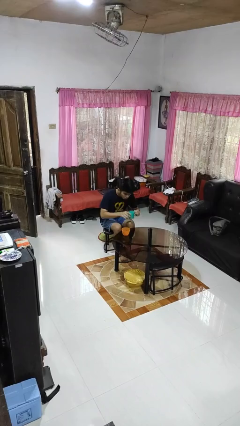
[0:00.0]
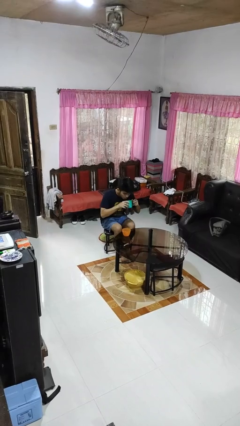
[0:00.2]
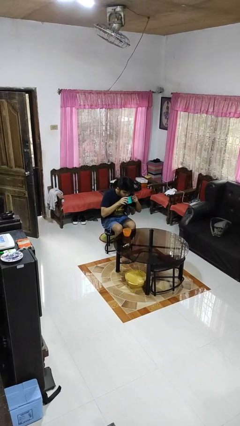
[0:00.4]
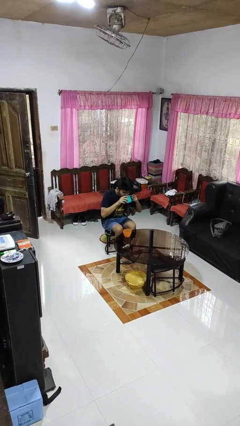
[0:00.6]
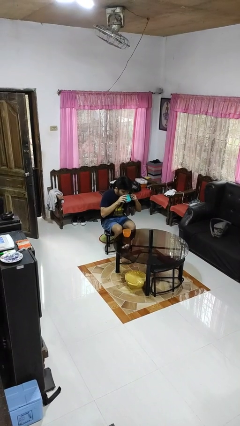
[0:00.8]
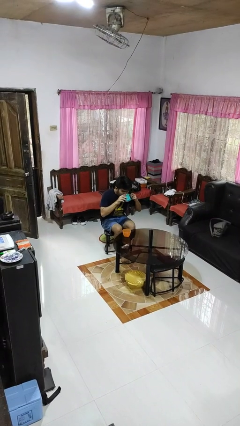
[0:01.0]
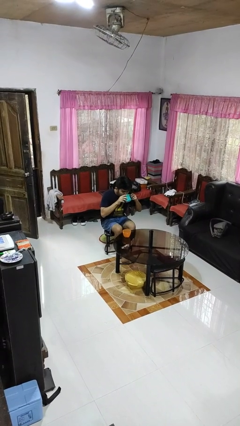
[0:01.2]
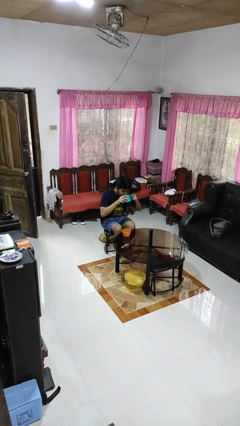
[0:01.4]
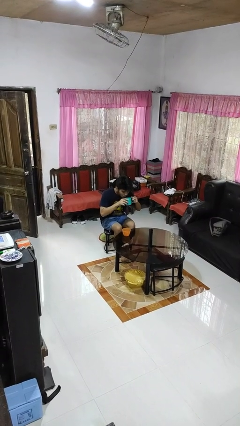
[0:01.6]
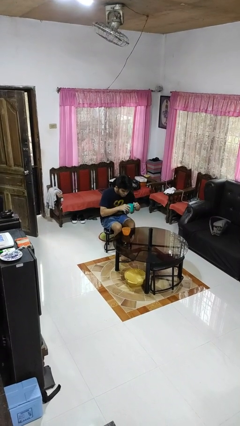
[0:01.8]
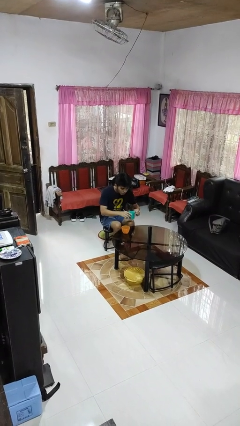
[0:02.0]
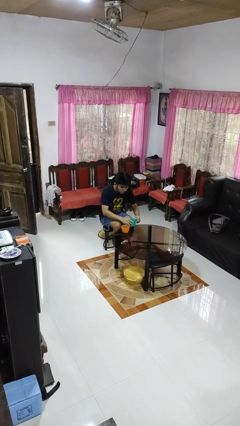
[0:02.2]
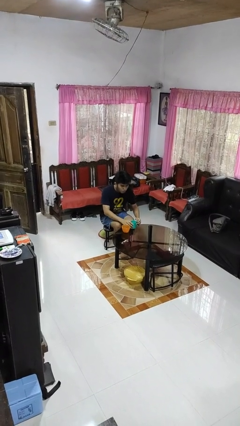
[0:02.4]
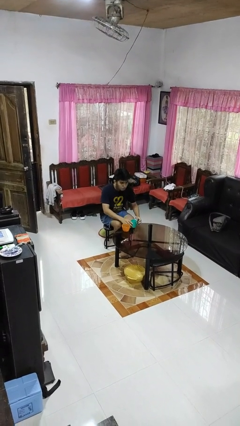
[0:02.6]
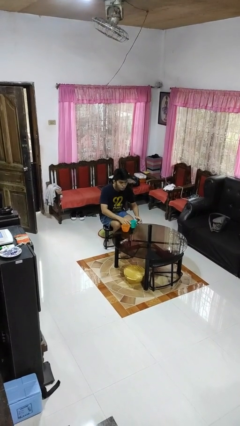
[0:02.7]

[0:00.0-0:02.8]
person drinks from cup

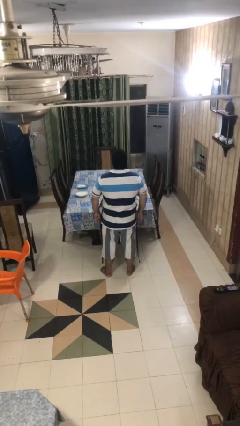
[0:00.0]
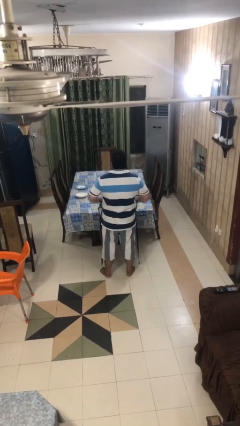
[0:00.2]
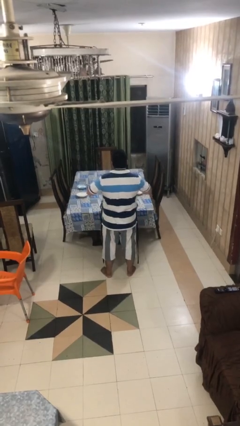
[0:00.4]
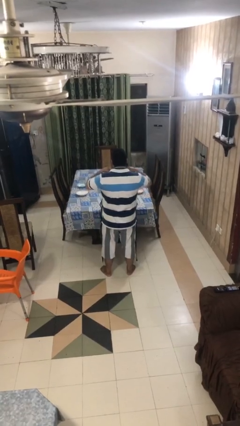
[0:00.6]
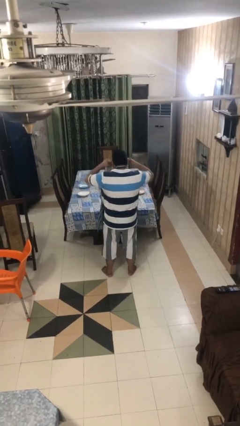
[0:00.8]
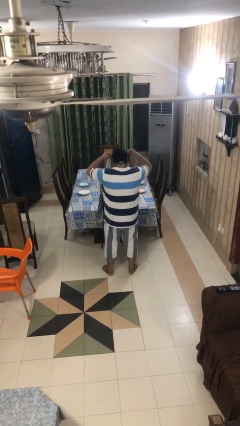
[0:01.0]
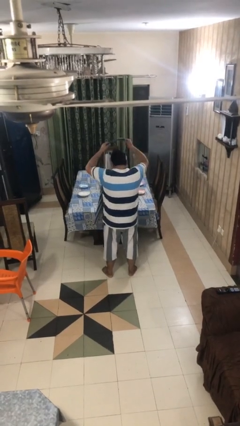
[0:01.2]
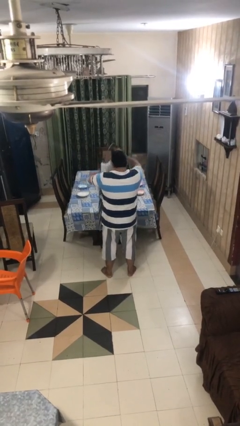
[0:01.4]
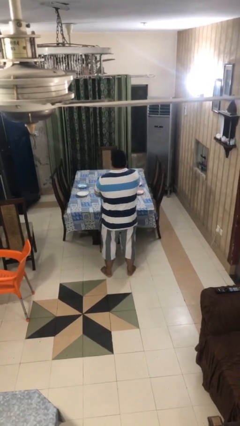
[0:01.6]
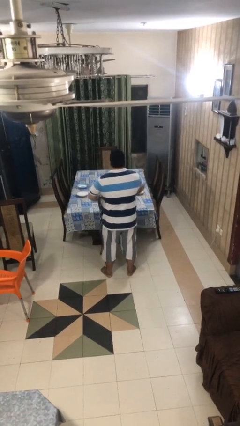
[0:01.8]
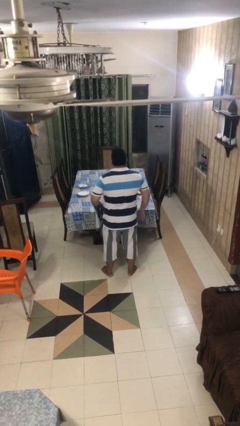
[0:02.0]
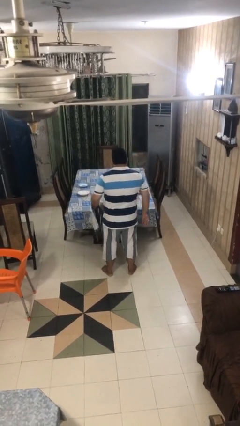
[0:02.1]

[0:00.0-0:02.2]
person takes off apron

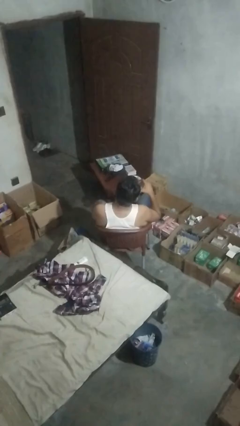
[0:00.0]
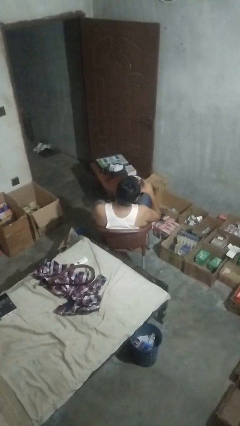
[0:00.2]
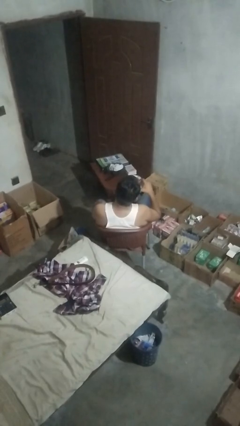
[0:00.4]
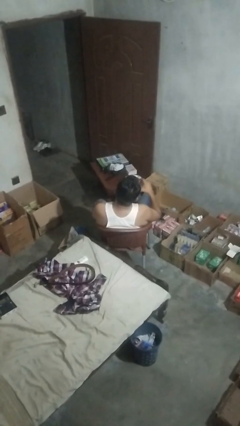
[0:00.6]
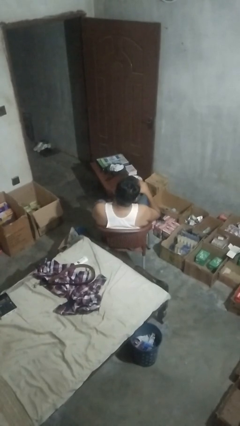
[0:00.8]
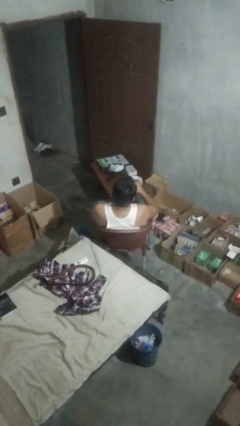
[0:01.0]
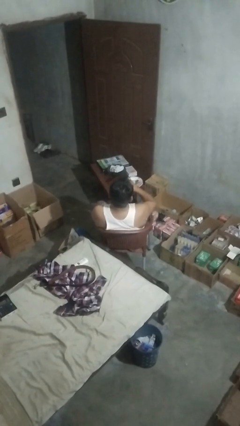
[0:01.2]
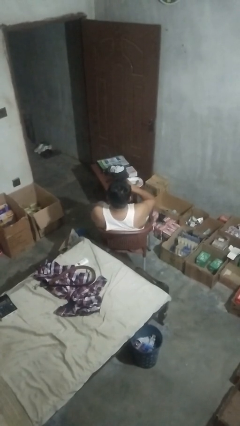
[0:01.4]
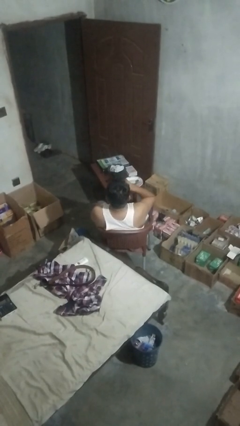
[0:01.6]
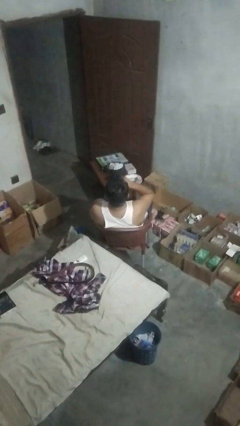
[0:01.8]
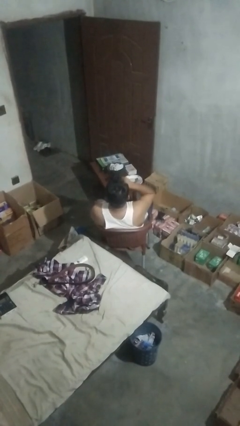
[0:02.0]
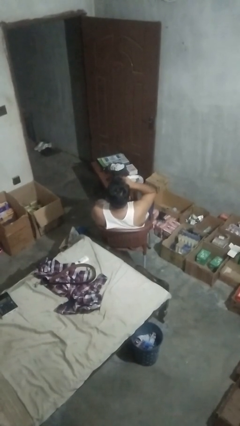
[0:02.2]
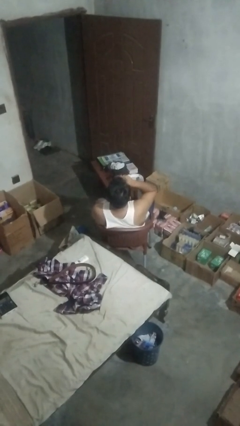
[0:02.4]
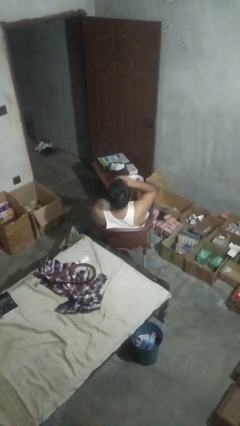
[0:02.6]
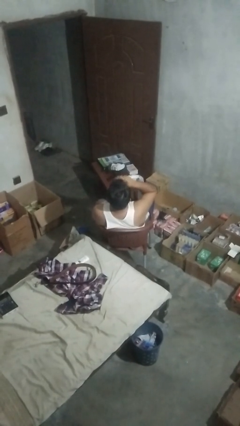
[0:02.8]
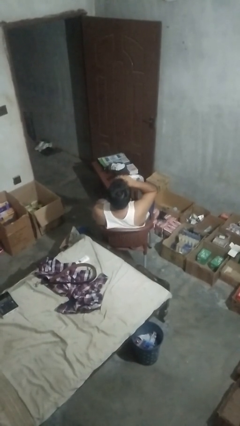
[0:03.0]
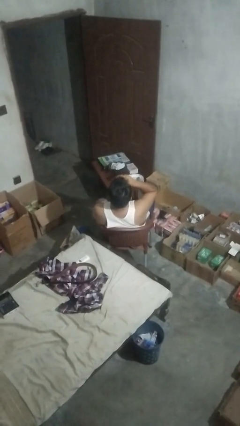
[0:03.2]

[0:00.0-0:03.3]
person drinks from shotglass

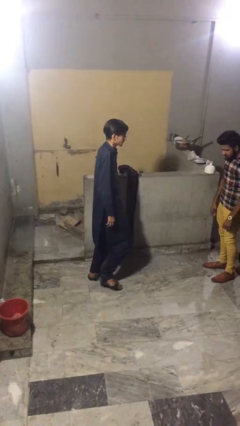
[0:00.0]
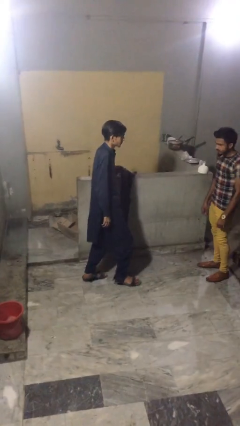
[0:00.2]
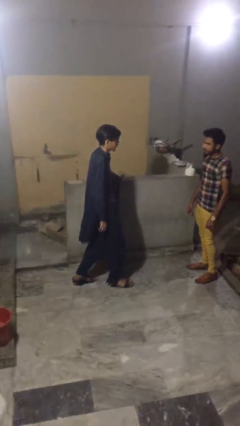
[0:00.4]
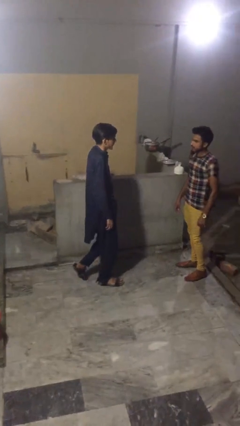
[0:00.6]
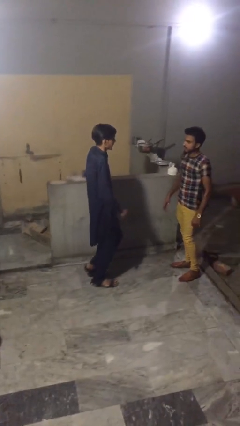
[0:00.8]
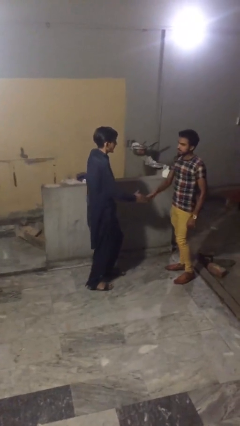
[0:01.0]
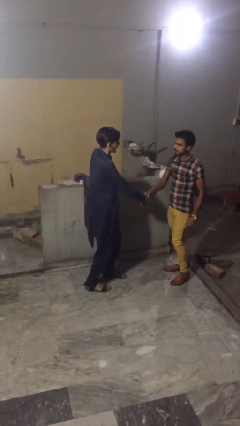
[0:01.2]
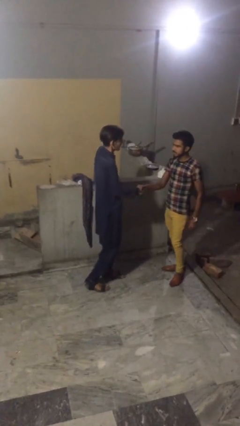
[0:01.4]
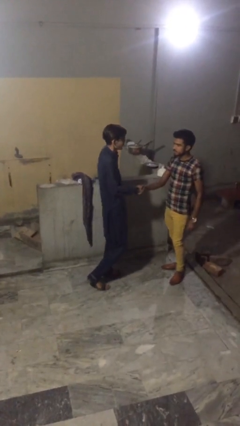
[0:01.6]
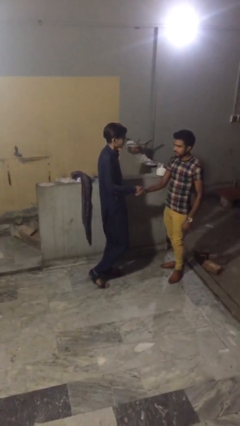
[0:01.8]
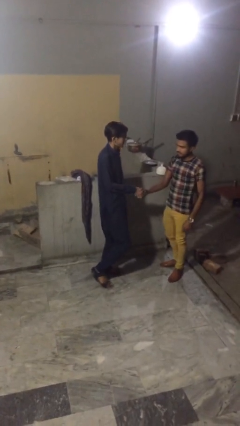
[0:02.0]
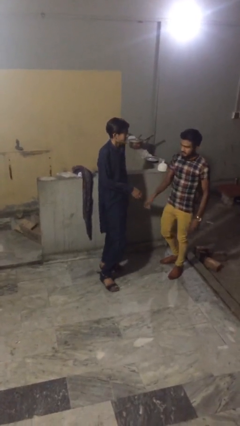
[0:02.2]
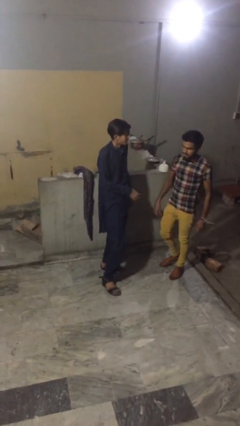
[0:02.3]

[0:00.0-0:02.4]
person shakes hand

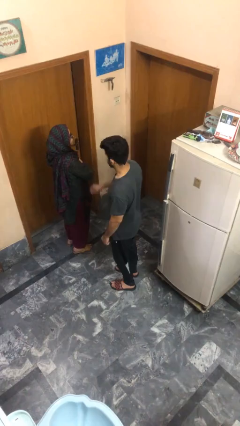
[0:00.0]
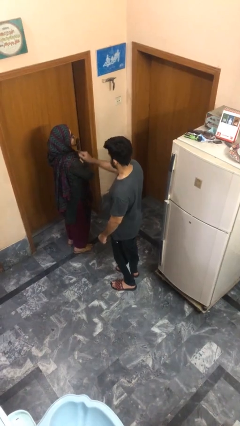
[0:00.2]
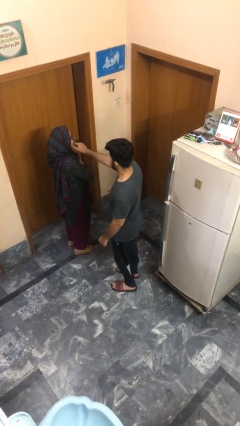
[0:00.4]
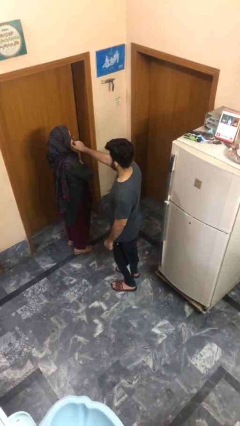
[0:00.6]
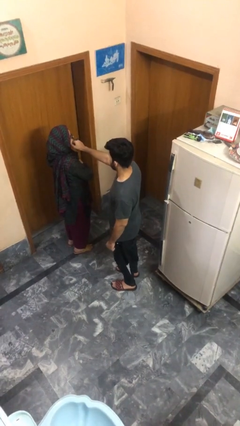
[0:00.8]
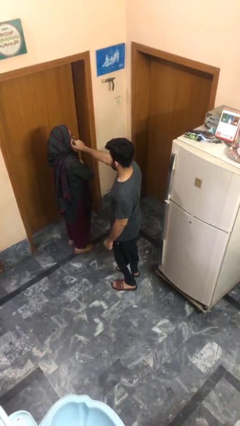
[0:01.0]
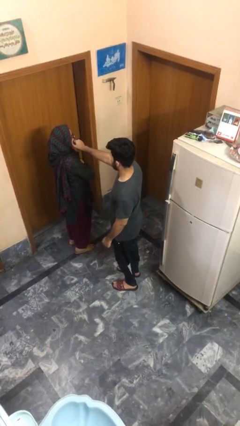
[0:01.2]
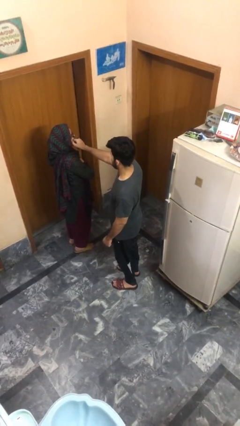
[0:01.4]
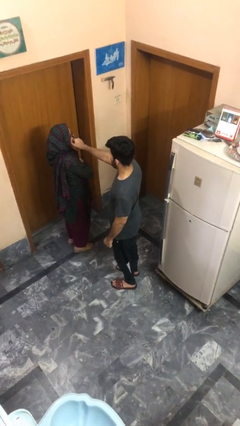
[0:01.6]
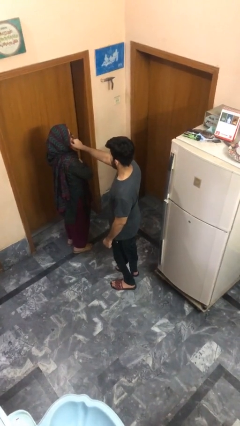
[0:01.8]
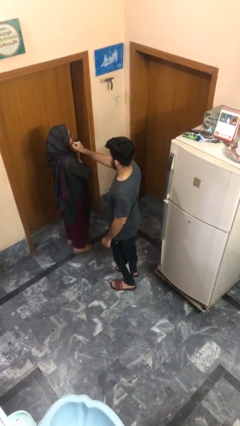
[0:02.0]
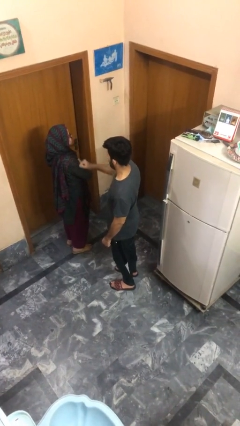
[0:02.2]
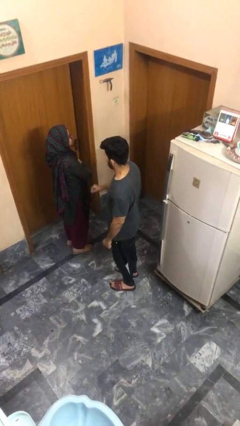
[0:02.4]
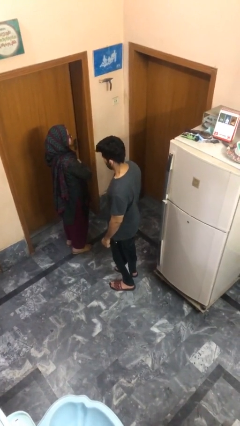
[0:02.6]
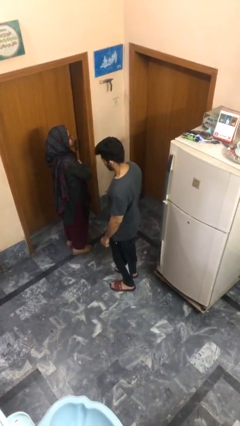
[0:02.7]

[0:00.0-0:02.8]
person touches face of person

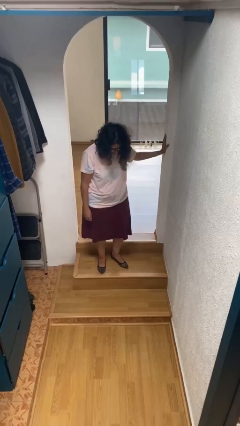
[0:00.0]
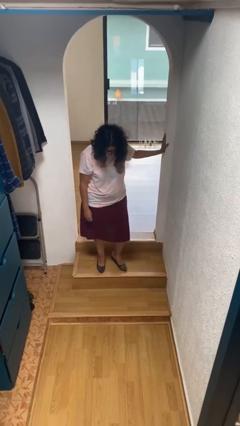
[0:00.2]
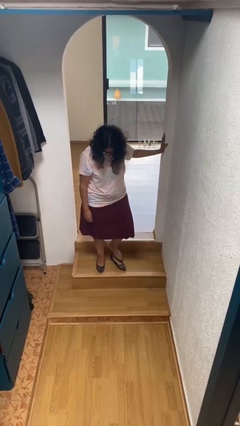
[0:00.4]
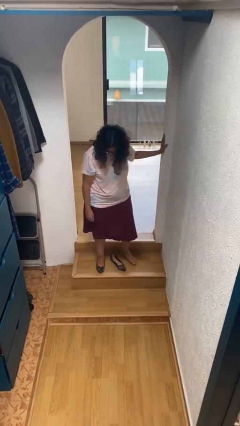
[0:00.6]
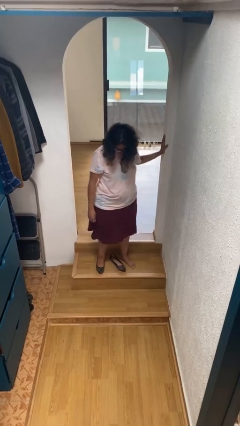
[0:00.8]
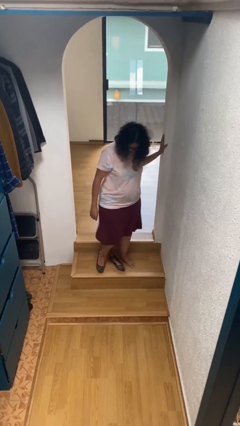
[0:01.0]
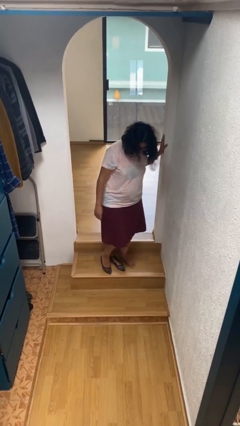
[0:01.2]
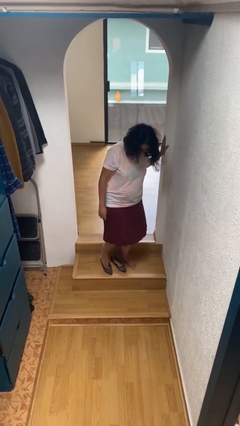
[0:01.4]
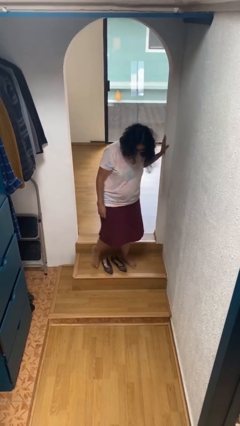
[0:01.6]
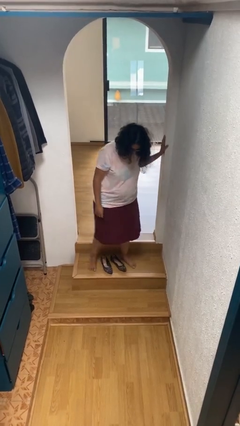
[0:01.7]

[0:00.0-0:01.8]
person takes off shoes

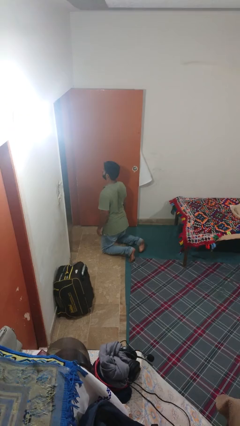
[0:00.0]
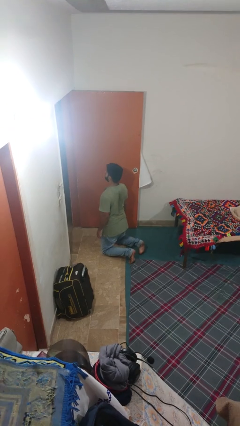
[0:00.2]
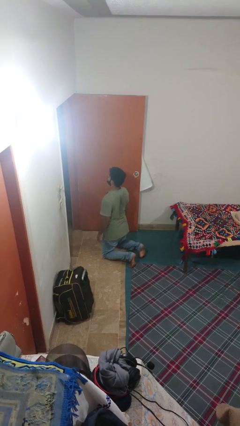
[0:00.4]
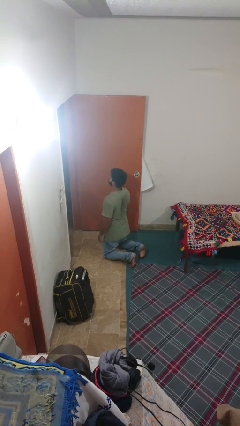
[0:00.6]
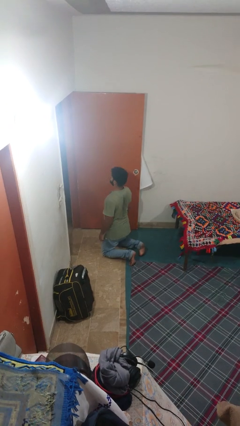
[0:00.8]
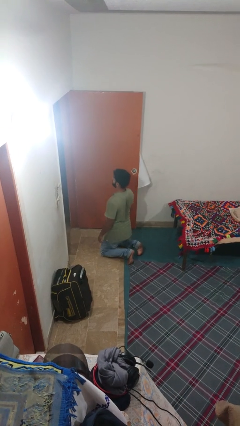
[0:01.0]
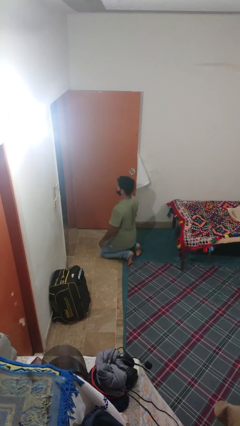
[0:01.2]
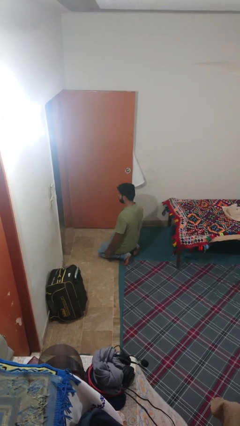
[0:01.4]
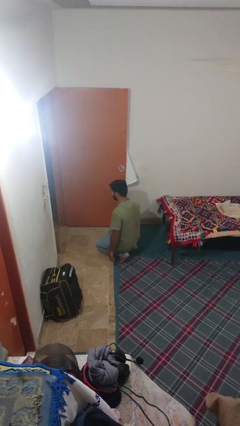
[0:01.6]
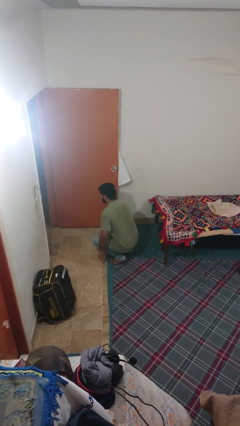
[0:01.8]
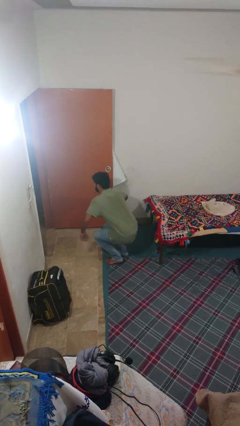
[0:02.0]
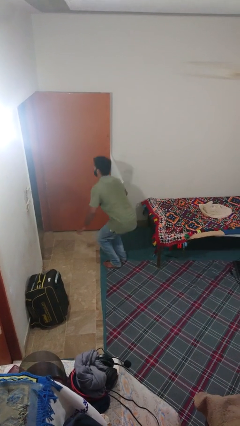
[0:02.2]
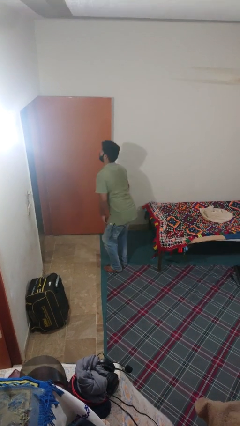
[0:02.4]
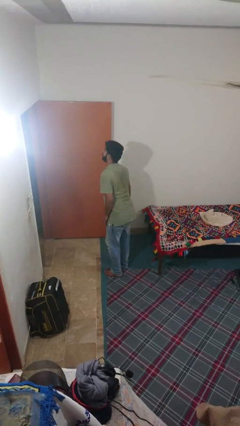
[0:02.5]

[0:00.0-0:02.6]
person stands up from floor
